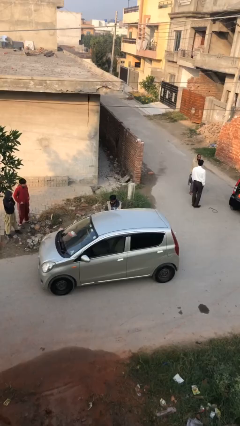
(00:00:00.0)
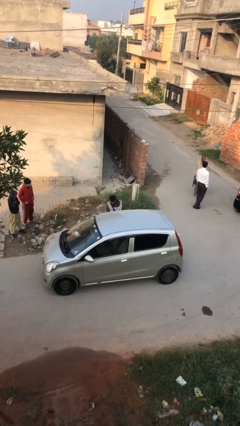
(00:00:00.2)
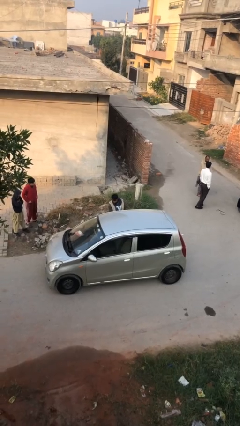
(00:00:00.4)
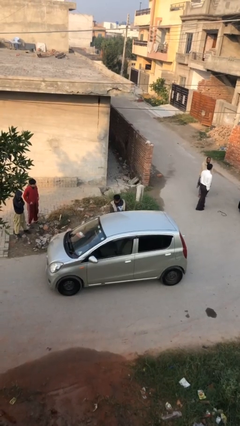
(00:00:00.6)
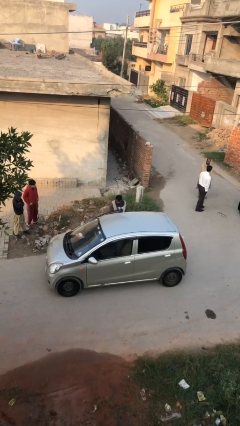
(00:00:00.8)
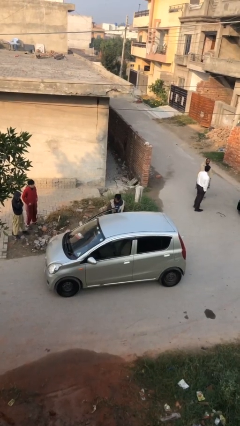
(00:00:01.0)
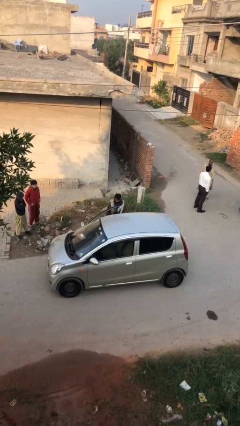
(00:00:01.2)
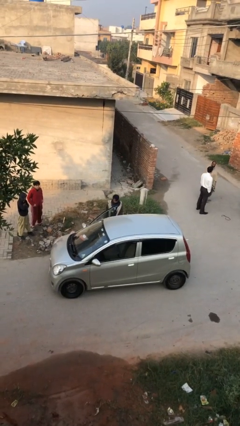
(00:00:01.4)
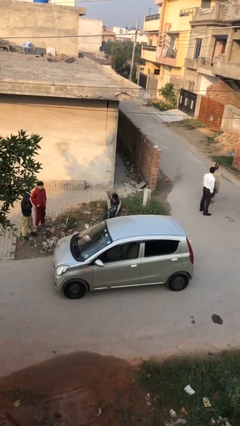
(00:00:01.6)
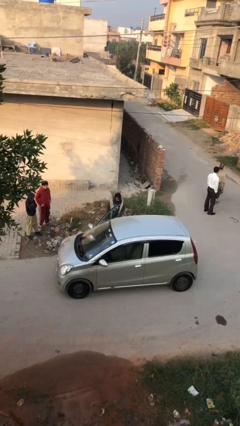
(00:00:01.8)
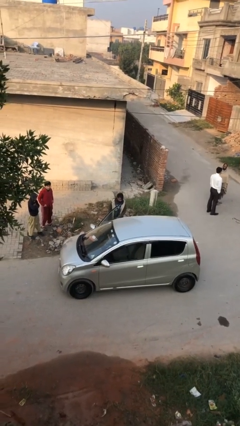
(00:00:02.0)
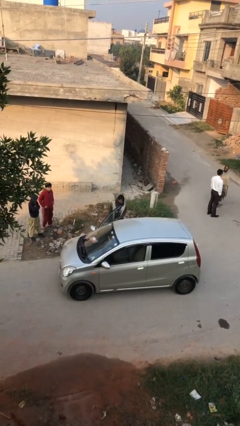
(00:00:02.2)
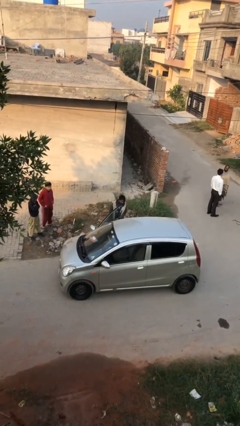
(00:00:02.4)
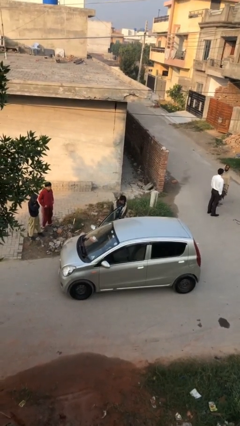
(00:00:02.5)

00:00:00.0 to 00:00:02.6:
person opens car door

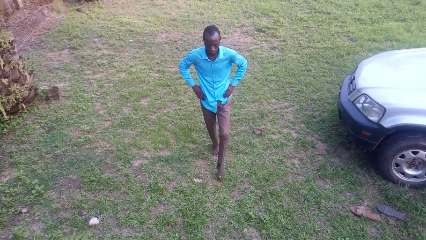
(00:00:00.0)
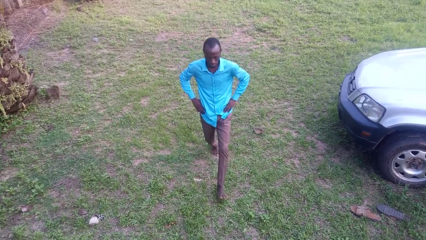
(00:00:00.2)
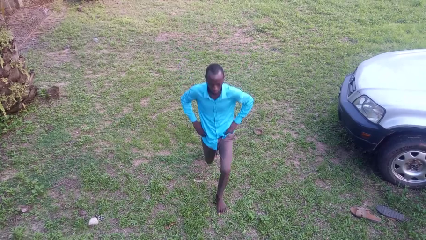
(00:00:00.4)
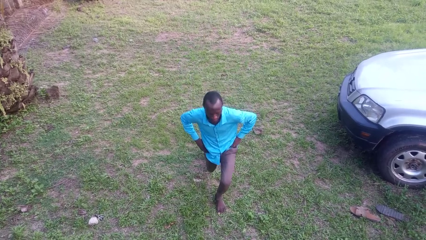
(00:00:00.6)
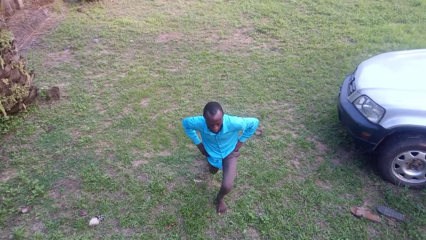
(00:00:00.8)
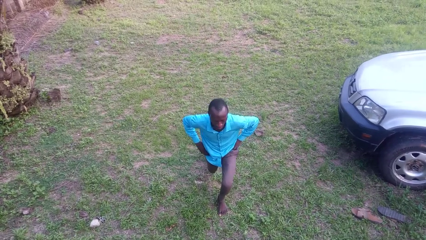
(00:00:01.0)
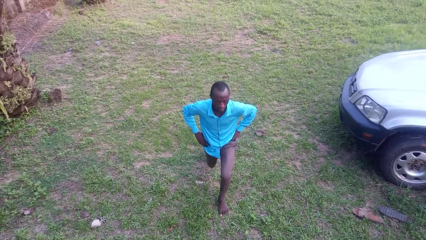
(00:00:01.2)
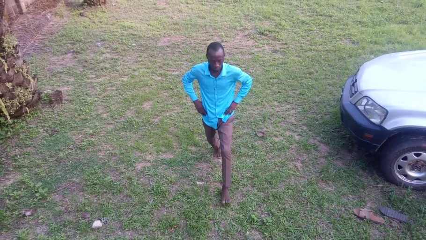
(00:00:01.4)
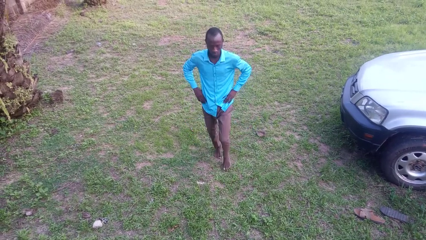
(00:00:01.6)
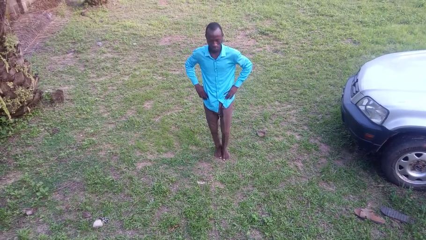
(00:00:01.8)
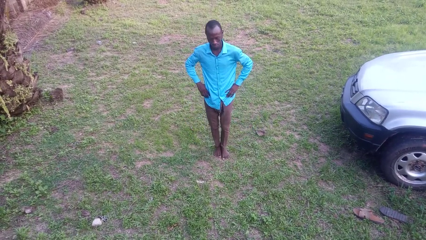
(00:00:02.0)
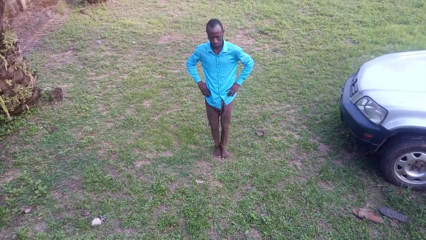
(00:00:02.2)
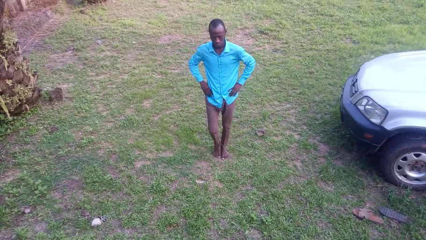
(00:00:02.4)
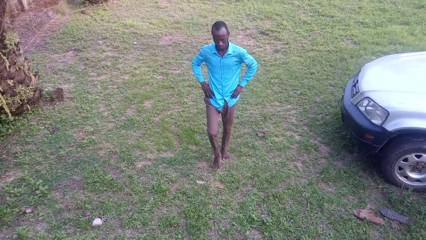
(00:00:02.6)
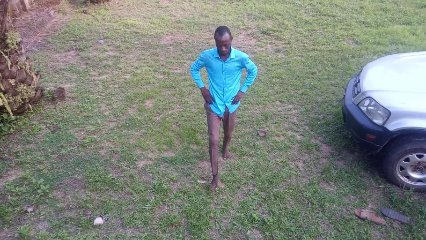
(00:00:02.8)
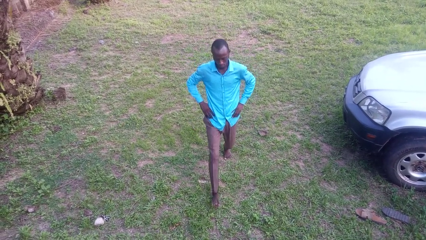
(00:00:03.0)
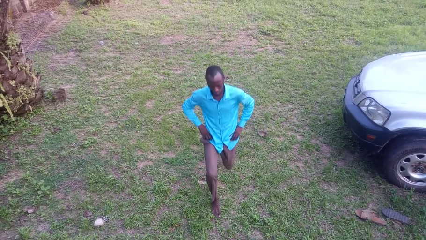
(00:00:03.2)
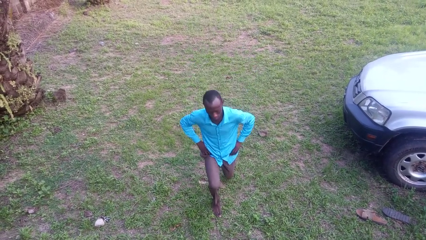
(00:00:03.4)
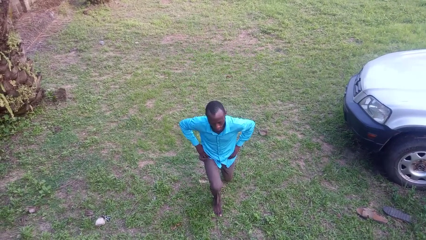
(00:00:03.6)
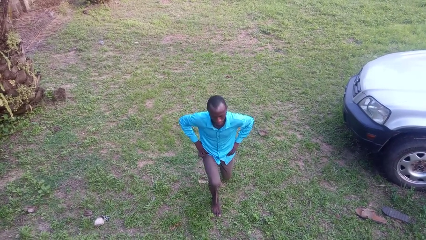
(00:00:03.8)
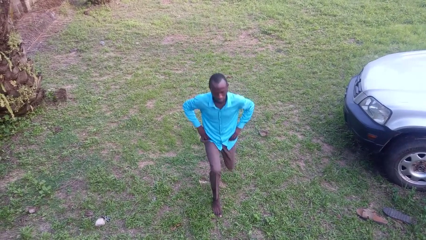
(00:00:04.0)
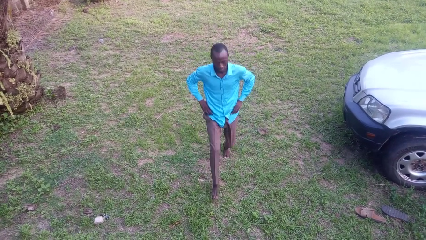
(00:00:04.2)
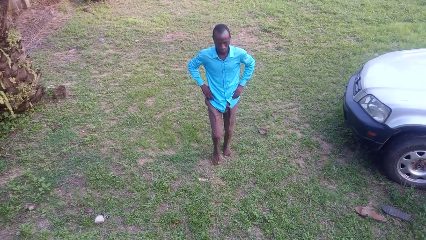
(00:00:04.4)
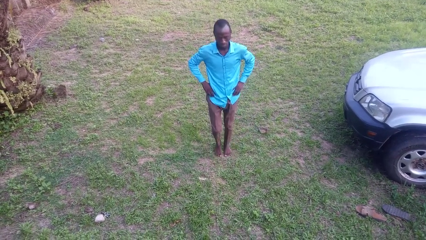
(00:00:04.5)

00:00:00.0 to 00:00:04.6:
person exercises with lunges

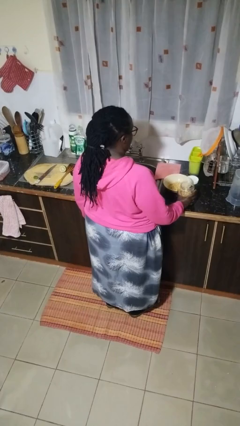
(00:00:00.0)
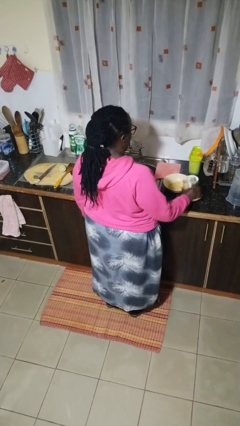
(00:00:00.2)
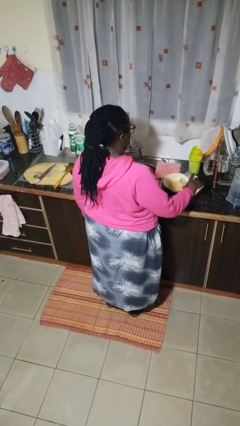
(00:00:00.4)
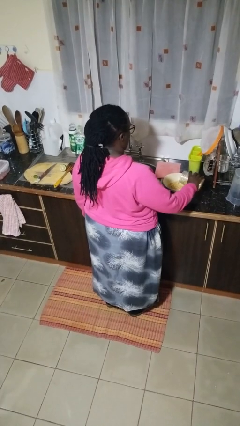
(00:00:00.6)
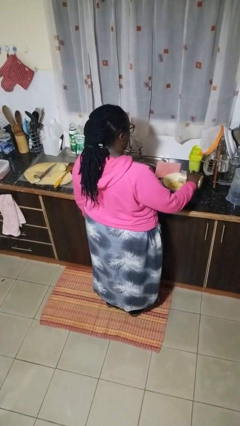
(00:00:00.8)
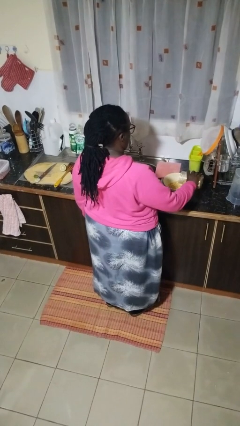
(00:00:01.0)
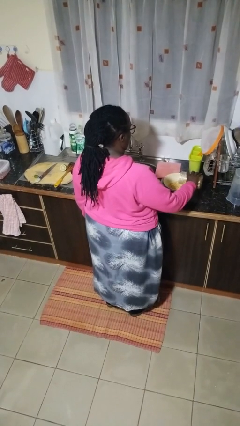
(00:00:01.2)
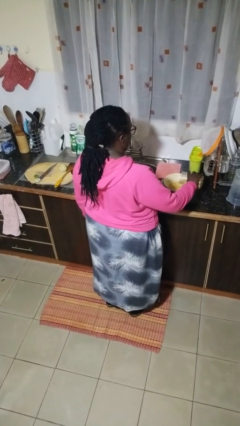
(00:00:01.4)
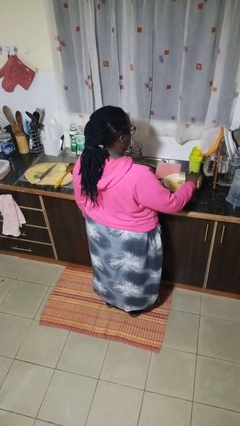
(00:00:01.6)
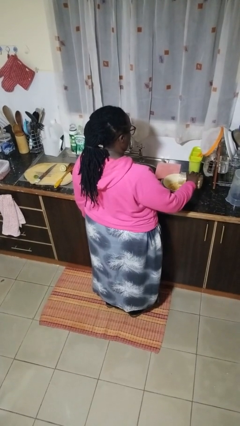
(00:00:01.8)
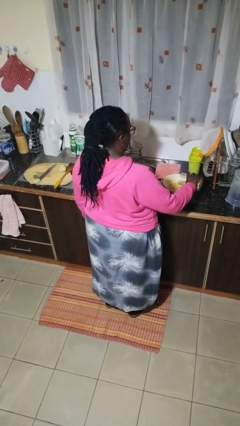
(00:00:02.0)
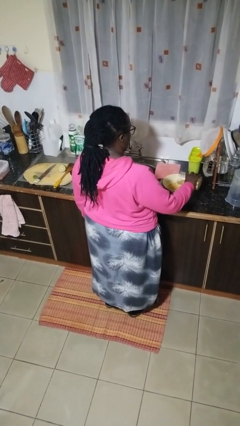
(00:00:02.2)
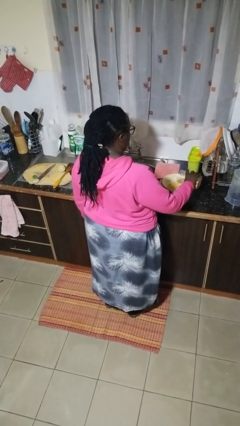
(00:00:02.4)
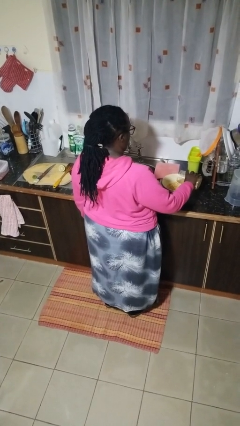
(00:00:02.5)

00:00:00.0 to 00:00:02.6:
person pours into bowl

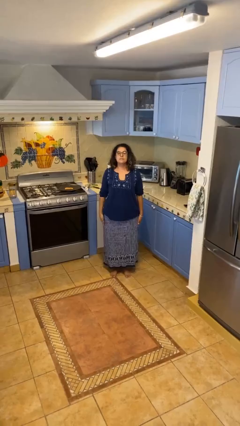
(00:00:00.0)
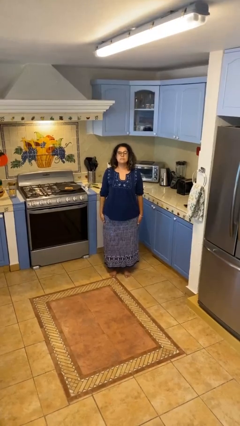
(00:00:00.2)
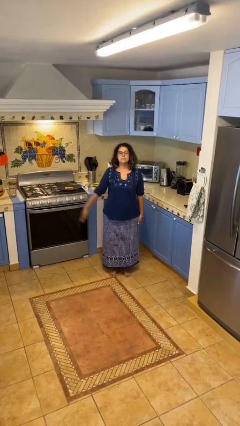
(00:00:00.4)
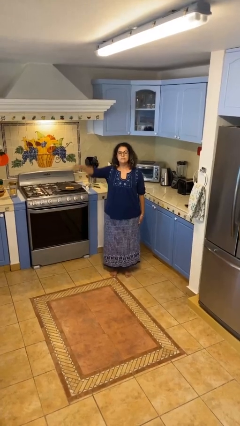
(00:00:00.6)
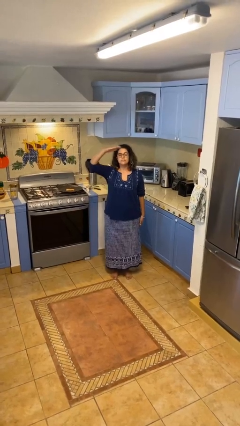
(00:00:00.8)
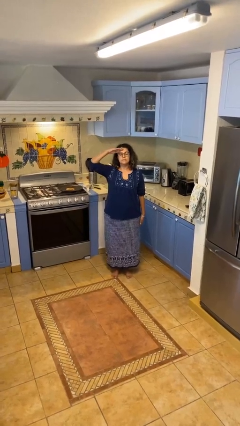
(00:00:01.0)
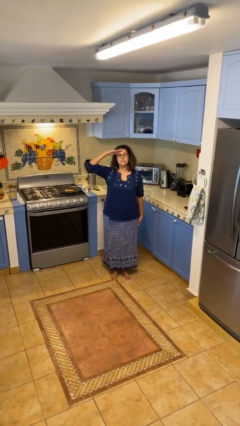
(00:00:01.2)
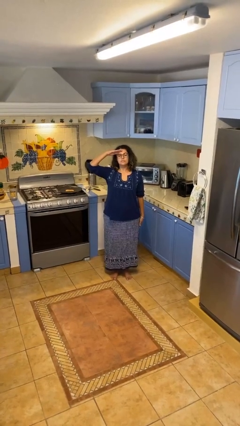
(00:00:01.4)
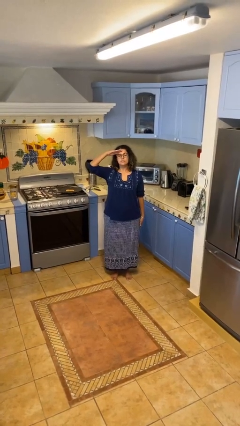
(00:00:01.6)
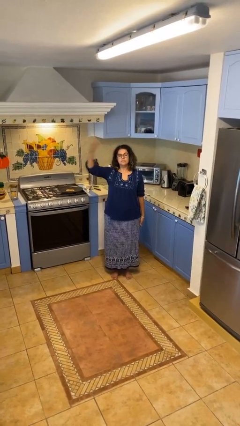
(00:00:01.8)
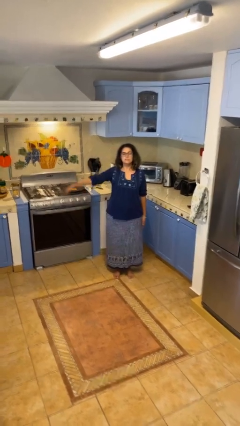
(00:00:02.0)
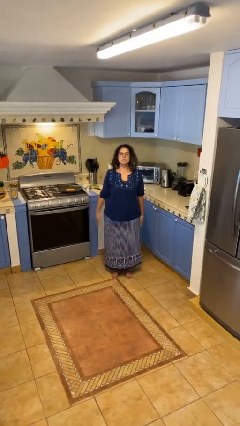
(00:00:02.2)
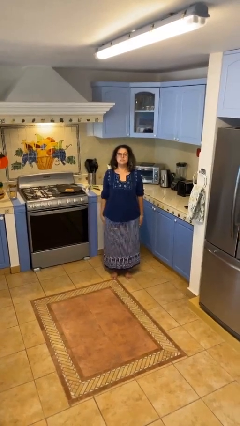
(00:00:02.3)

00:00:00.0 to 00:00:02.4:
person salutes

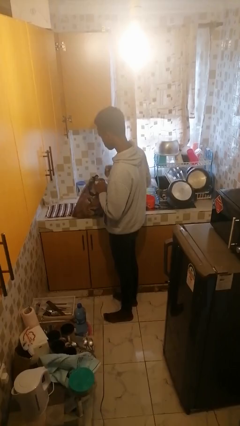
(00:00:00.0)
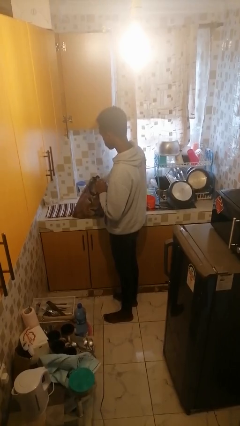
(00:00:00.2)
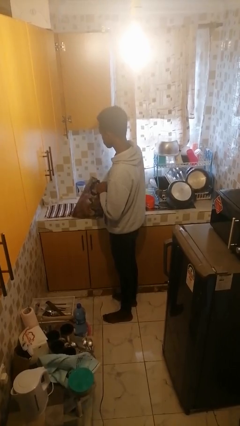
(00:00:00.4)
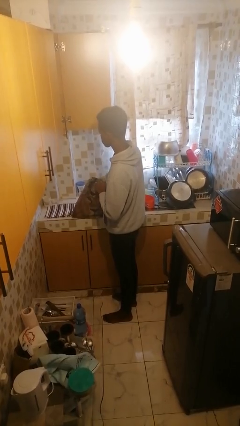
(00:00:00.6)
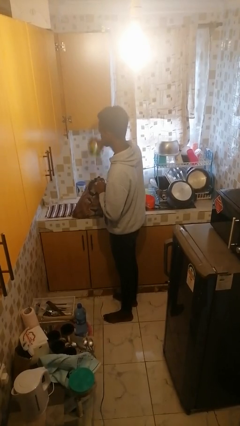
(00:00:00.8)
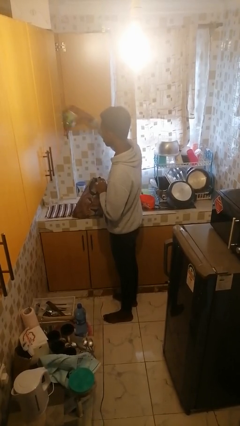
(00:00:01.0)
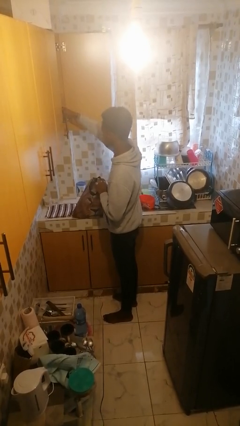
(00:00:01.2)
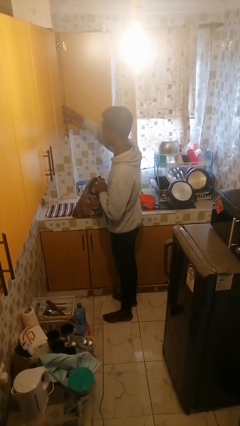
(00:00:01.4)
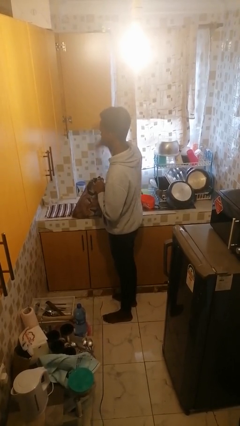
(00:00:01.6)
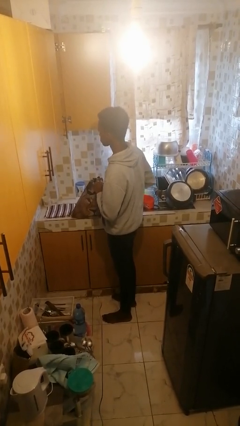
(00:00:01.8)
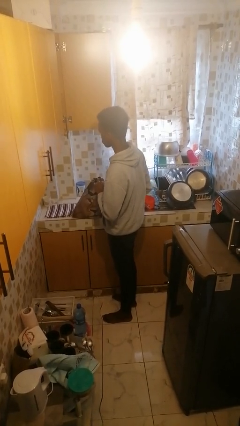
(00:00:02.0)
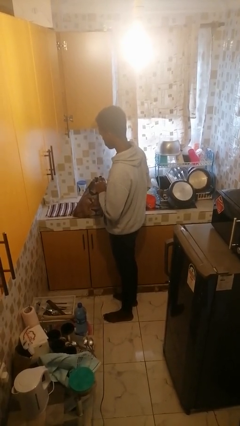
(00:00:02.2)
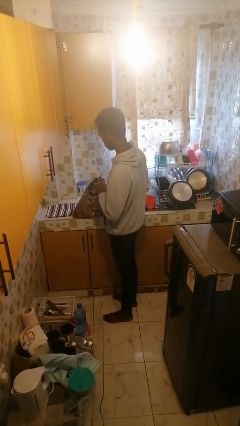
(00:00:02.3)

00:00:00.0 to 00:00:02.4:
person loads groceries into cabinet

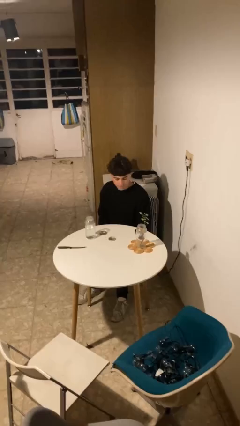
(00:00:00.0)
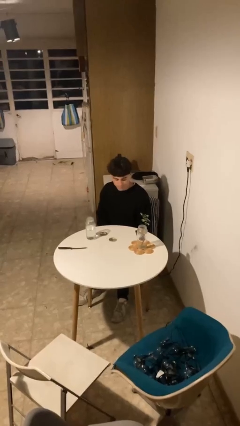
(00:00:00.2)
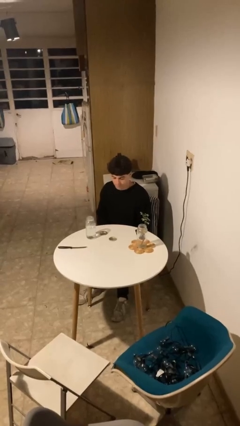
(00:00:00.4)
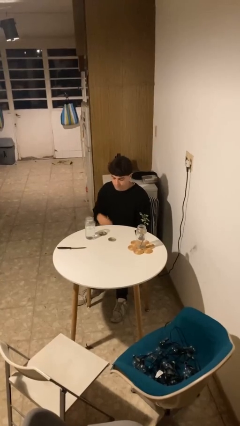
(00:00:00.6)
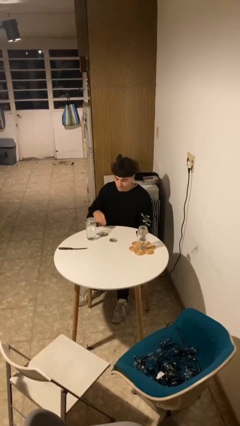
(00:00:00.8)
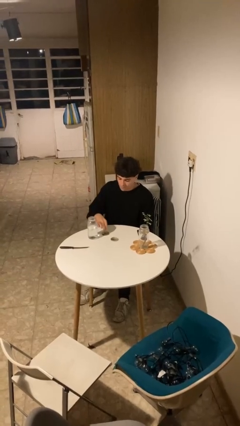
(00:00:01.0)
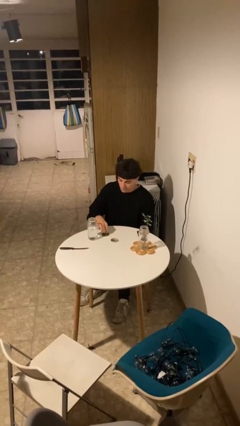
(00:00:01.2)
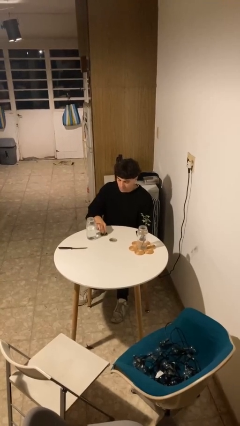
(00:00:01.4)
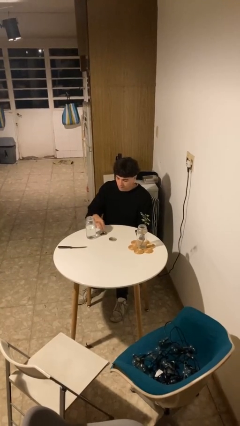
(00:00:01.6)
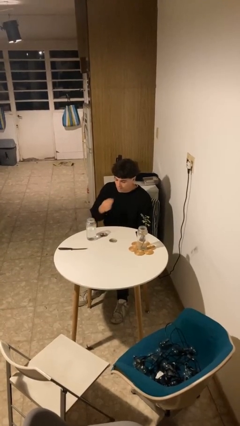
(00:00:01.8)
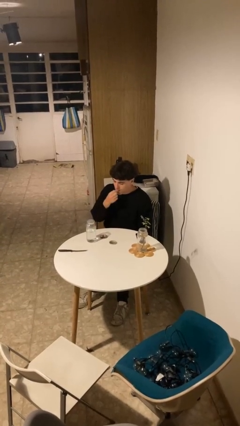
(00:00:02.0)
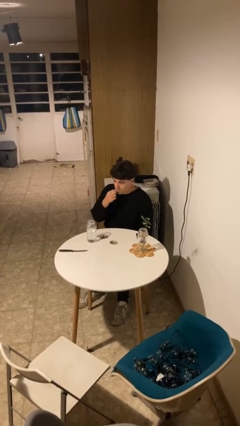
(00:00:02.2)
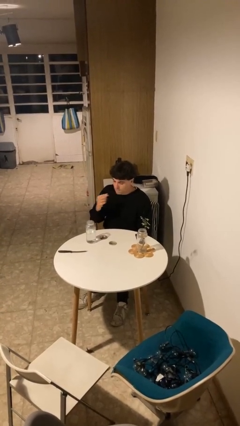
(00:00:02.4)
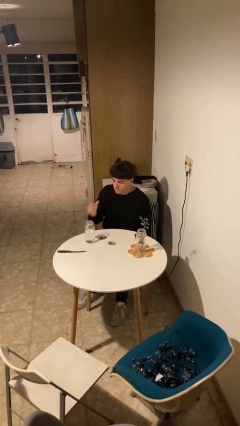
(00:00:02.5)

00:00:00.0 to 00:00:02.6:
person takes medicine pills

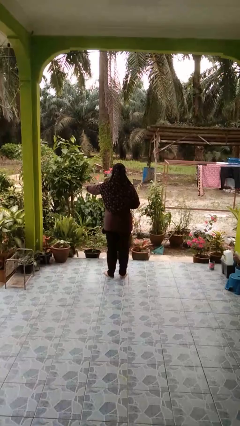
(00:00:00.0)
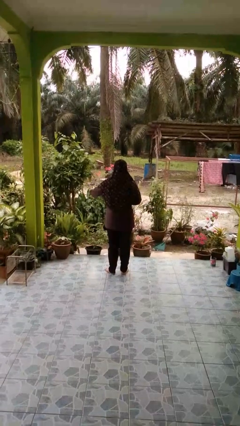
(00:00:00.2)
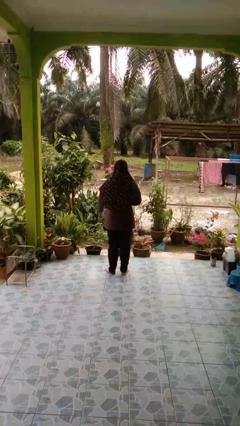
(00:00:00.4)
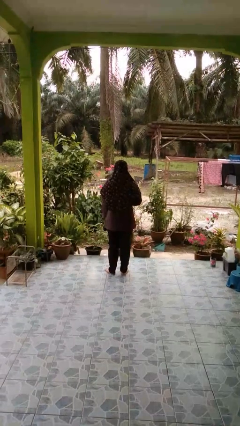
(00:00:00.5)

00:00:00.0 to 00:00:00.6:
person karate chop
